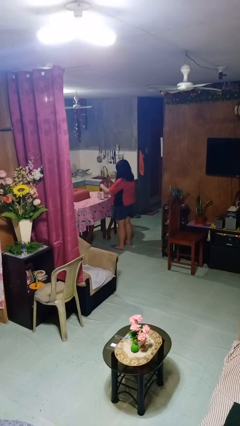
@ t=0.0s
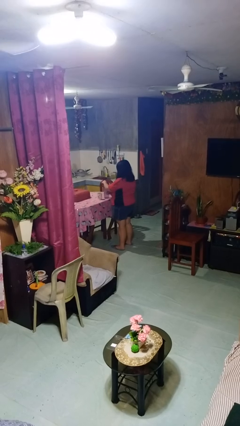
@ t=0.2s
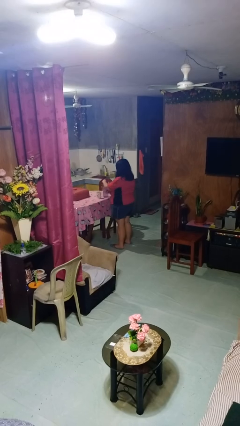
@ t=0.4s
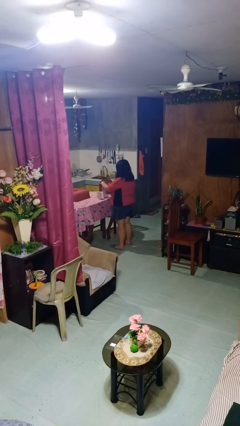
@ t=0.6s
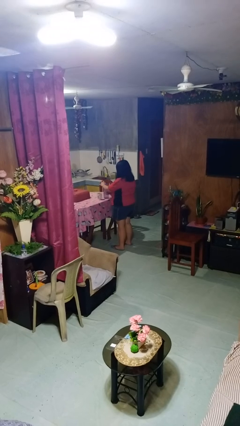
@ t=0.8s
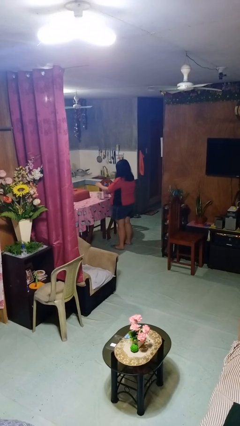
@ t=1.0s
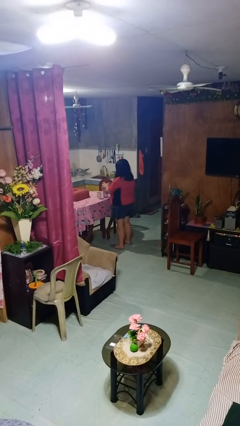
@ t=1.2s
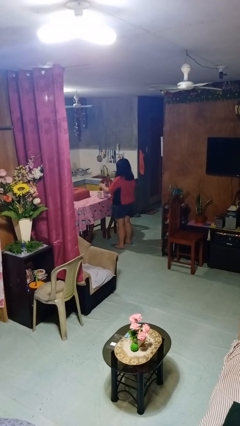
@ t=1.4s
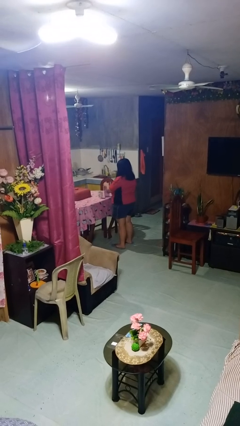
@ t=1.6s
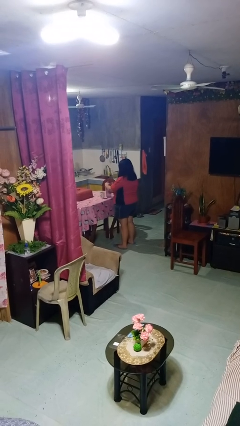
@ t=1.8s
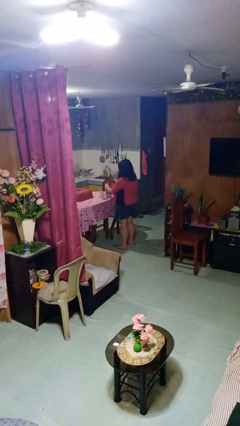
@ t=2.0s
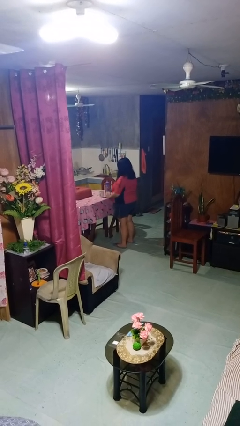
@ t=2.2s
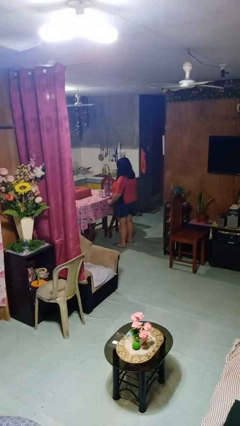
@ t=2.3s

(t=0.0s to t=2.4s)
person screws lid to bottle

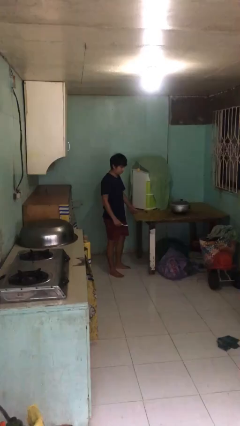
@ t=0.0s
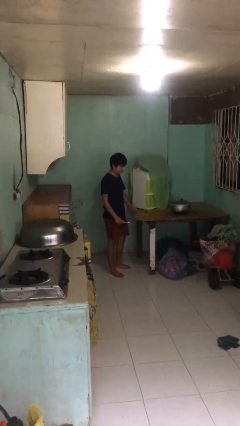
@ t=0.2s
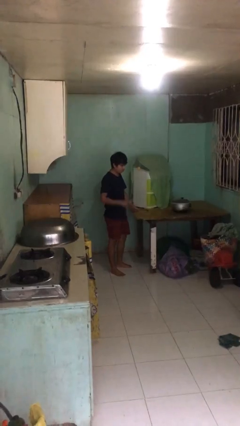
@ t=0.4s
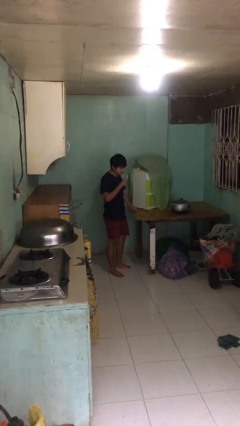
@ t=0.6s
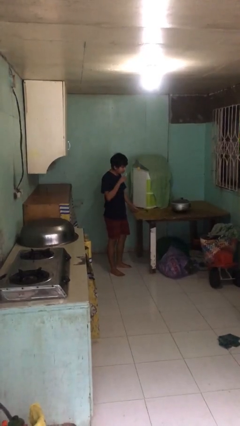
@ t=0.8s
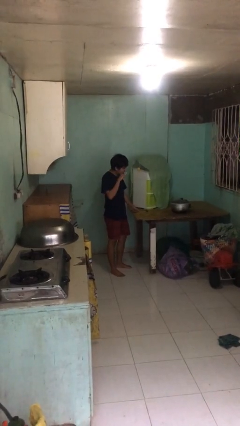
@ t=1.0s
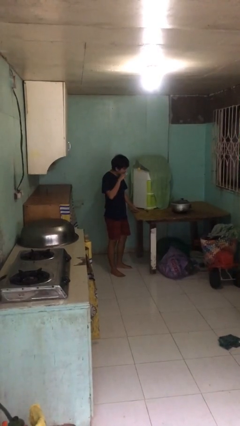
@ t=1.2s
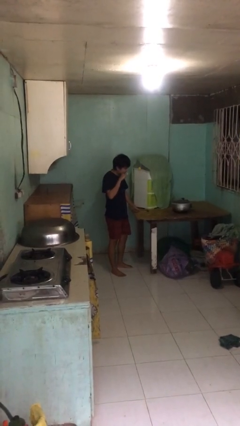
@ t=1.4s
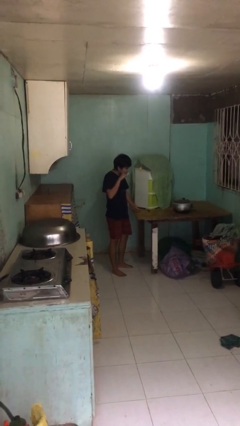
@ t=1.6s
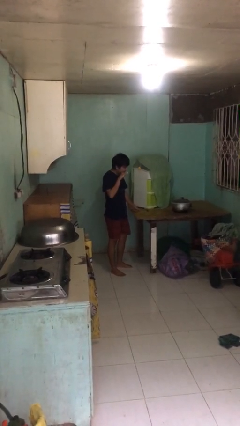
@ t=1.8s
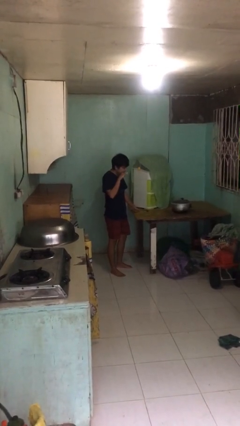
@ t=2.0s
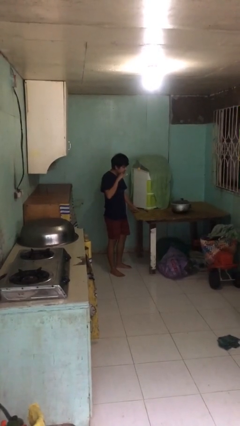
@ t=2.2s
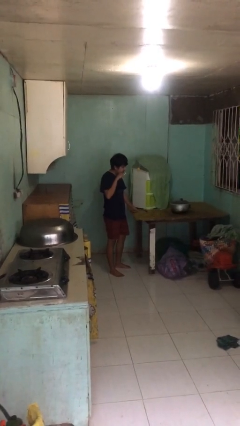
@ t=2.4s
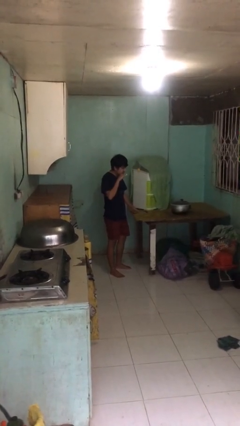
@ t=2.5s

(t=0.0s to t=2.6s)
person brushes teeth

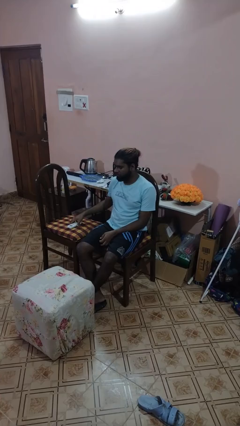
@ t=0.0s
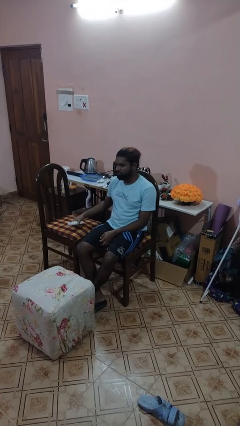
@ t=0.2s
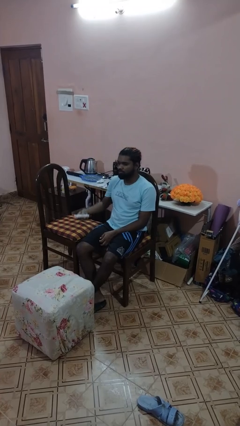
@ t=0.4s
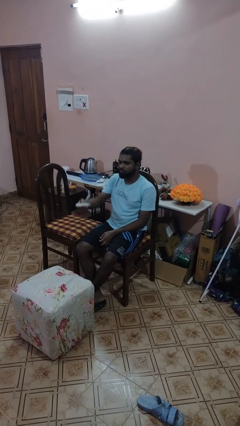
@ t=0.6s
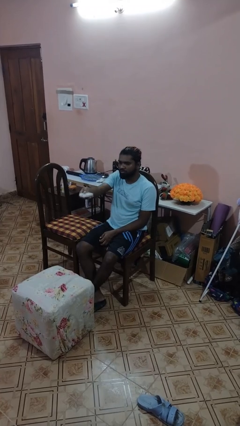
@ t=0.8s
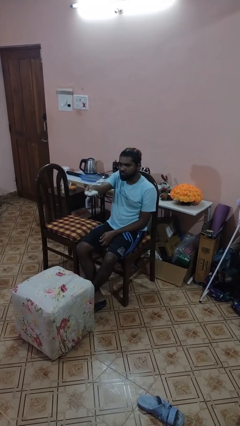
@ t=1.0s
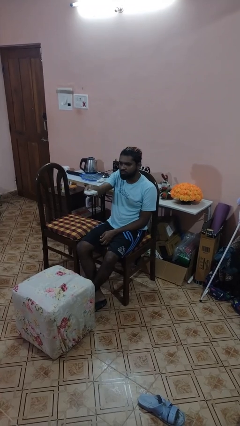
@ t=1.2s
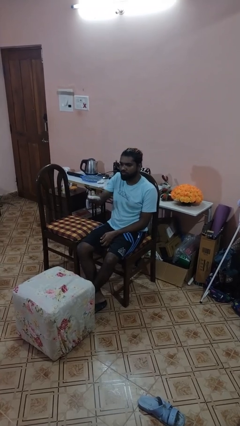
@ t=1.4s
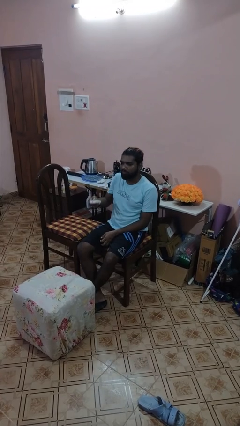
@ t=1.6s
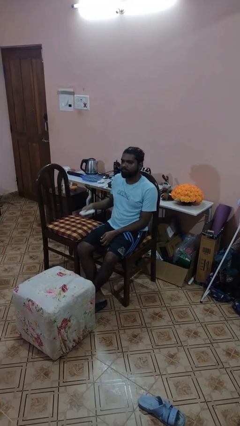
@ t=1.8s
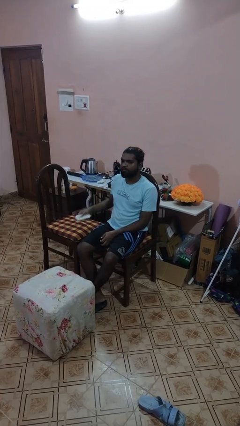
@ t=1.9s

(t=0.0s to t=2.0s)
person uses television remote

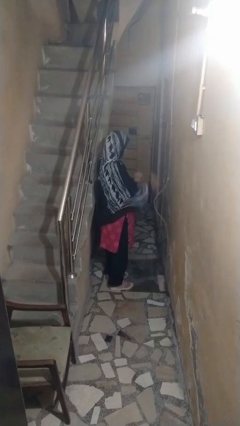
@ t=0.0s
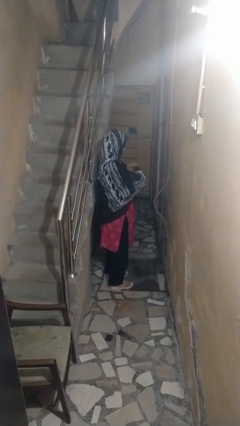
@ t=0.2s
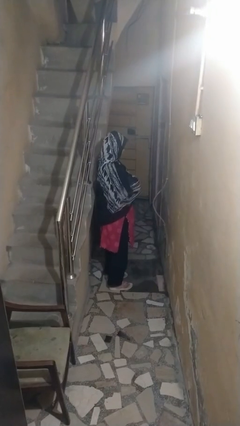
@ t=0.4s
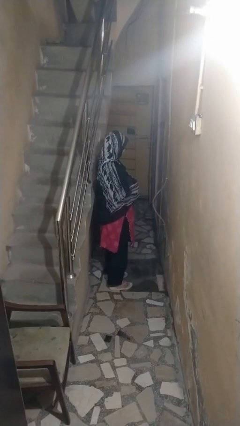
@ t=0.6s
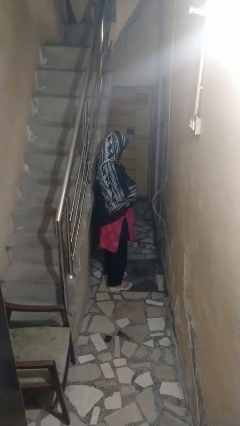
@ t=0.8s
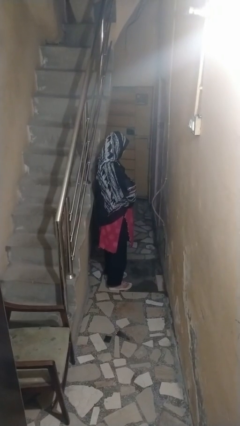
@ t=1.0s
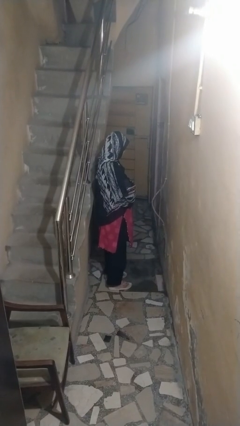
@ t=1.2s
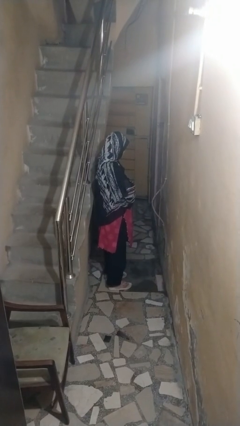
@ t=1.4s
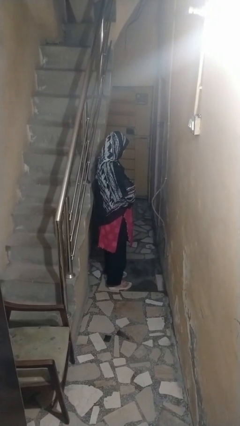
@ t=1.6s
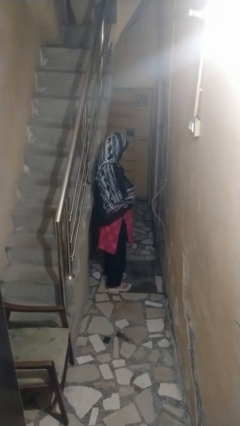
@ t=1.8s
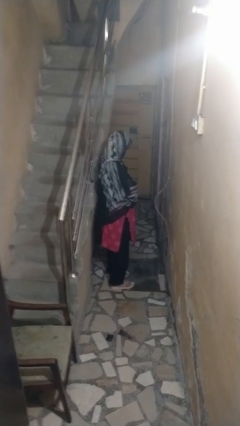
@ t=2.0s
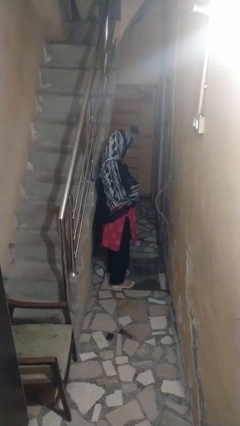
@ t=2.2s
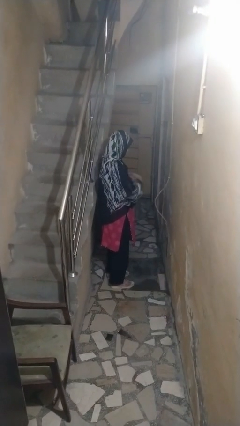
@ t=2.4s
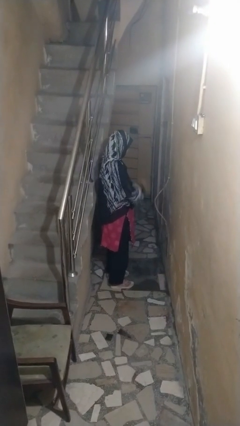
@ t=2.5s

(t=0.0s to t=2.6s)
person crosses arms

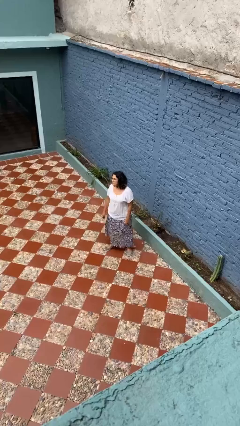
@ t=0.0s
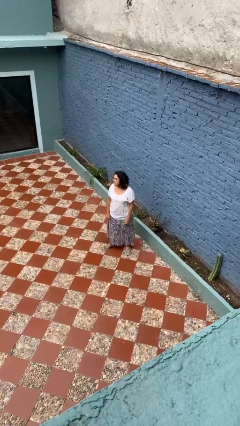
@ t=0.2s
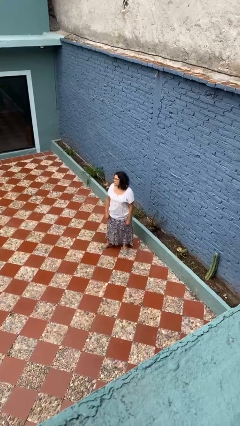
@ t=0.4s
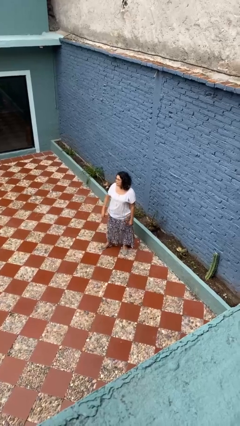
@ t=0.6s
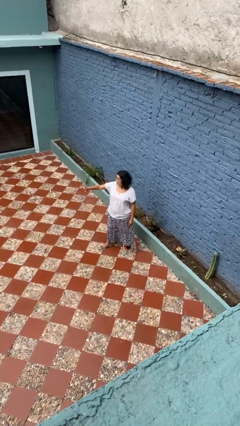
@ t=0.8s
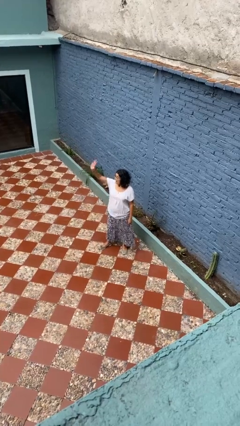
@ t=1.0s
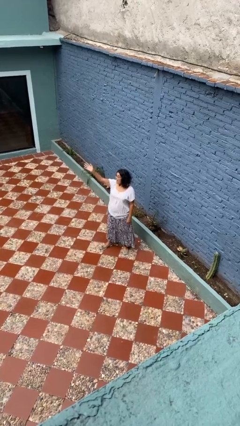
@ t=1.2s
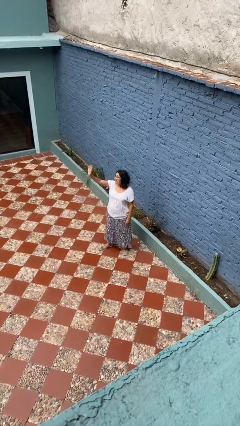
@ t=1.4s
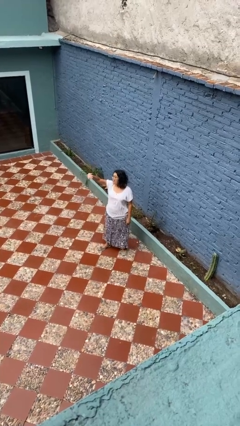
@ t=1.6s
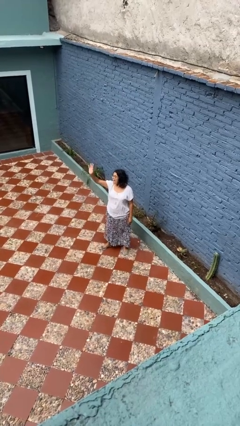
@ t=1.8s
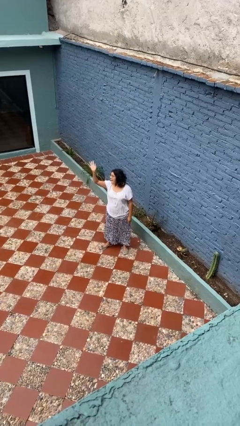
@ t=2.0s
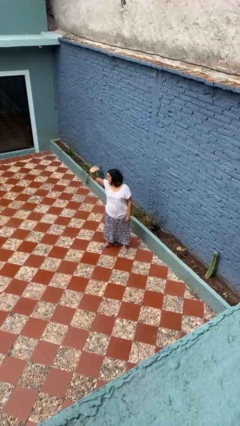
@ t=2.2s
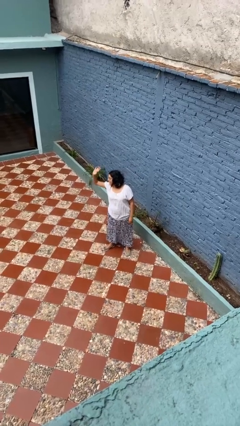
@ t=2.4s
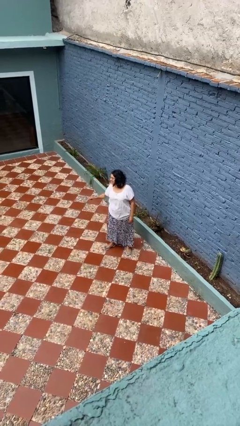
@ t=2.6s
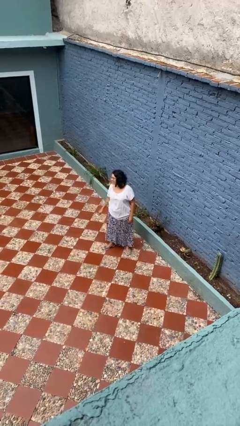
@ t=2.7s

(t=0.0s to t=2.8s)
person waves at person

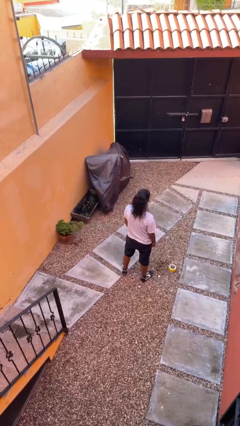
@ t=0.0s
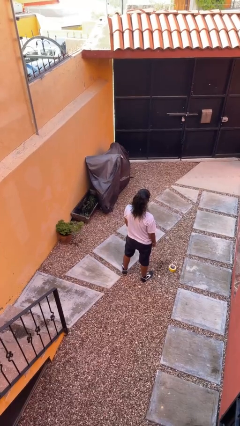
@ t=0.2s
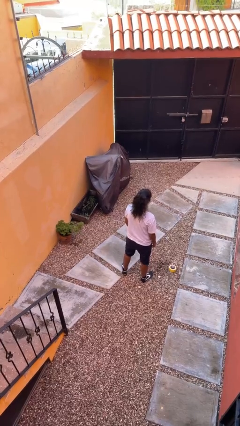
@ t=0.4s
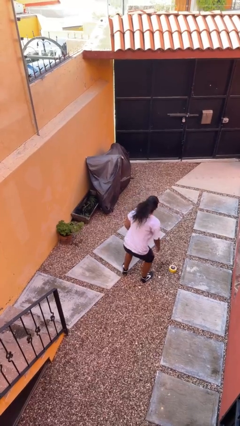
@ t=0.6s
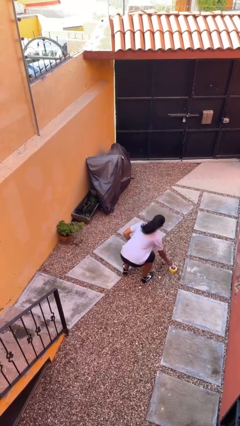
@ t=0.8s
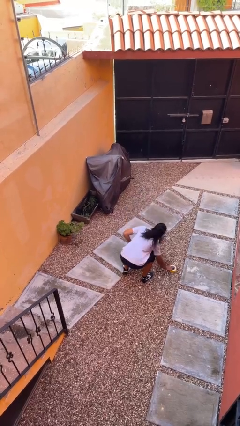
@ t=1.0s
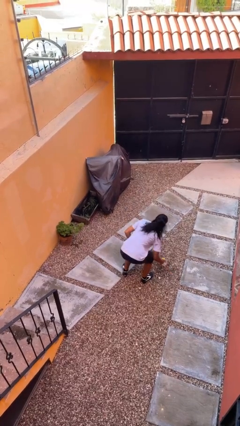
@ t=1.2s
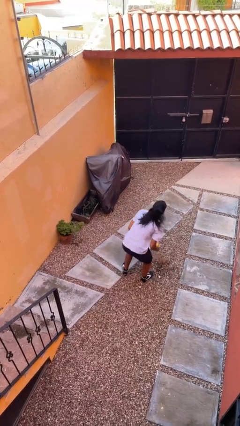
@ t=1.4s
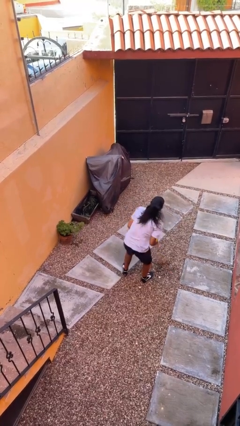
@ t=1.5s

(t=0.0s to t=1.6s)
person picks up object from floor

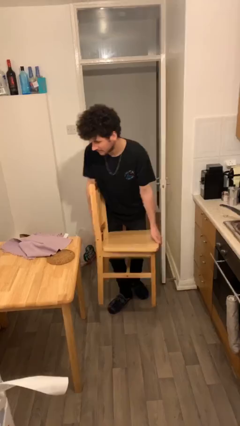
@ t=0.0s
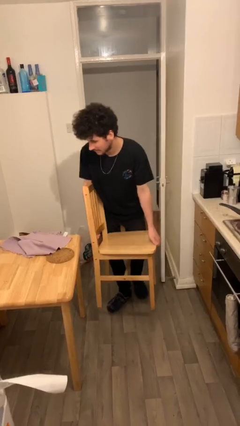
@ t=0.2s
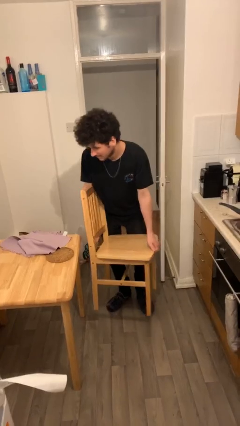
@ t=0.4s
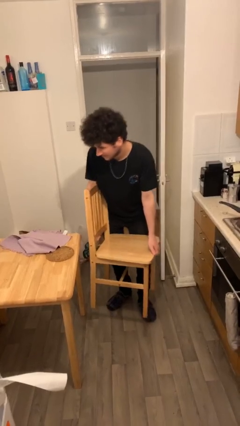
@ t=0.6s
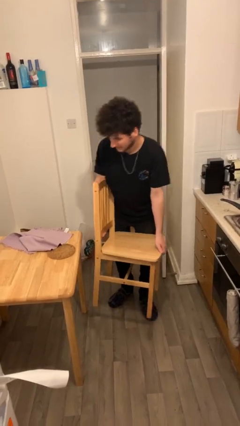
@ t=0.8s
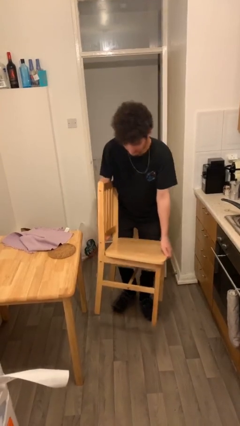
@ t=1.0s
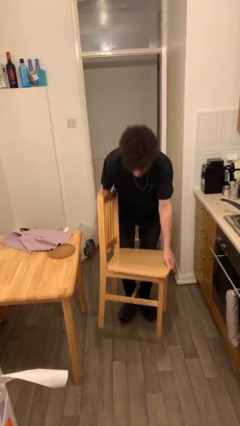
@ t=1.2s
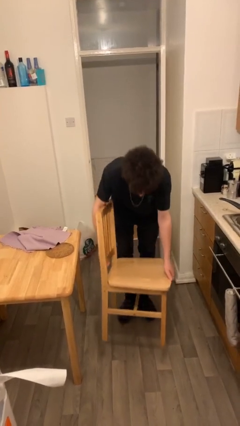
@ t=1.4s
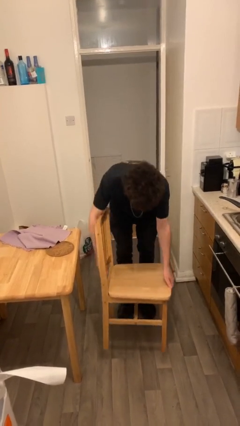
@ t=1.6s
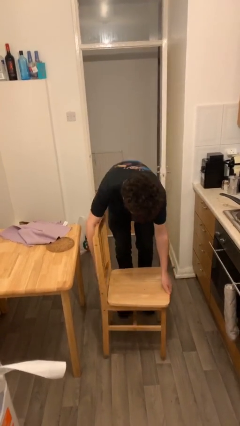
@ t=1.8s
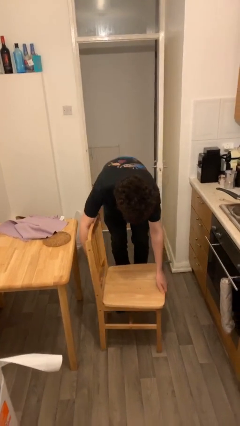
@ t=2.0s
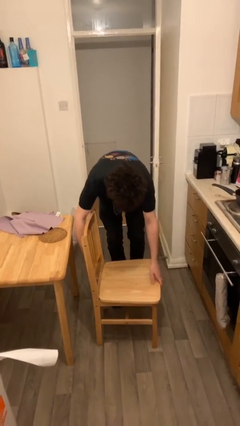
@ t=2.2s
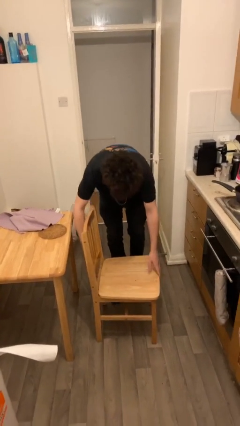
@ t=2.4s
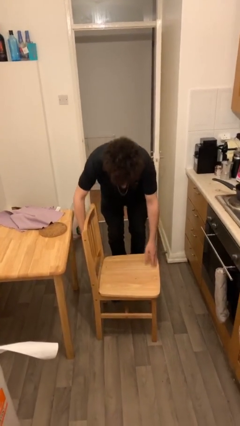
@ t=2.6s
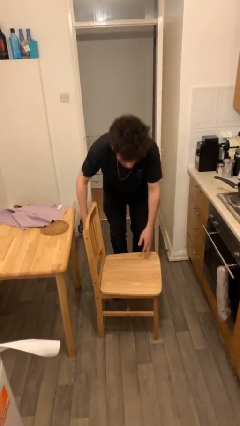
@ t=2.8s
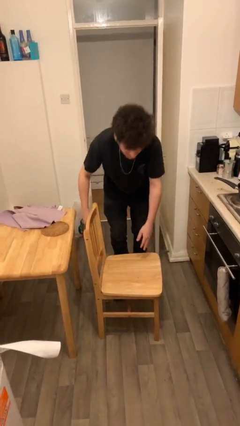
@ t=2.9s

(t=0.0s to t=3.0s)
person puts down object on floor
